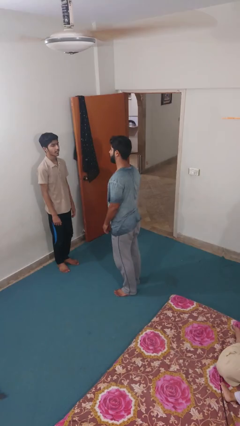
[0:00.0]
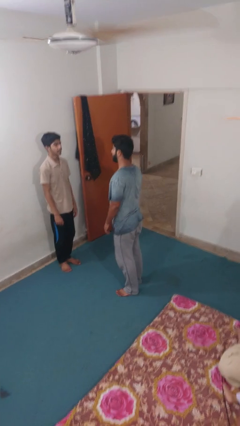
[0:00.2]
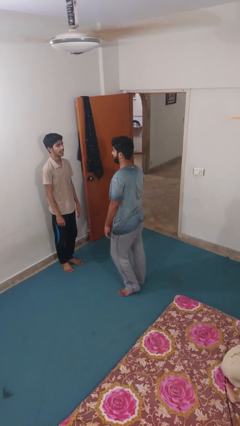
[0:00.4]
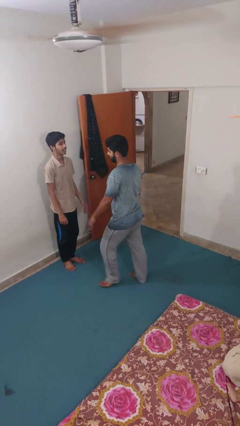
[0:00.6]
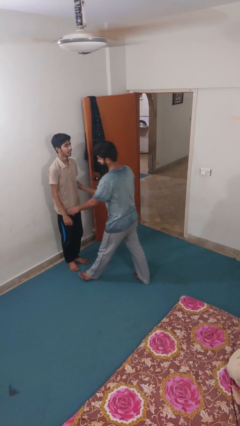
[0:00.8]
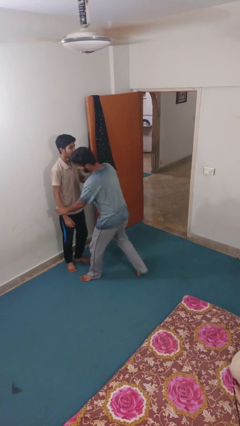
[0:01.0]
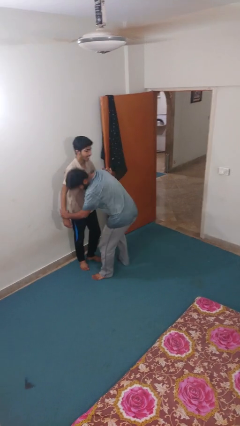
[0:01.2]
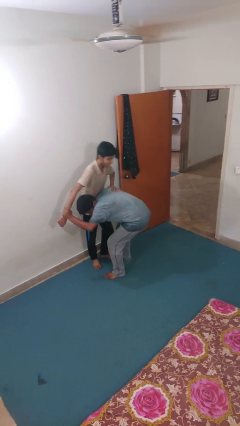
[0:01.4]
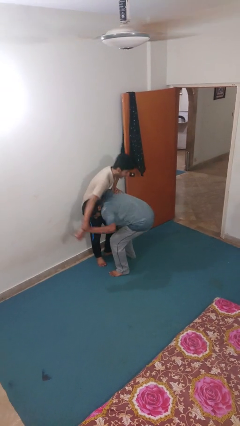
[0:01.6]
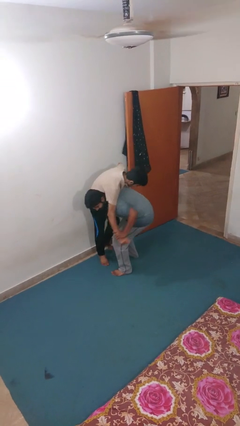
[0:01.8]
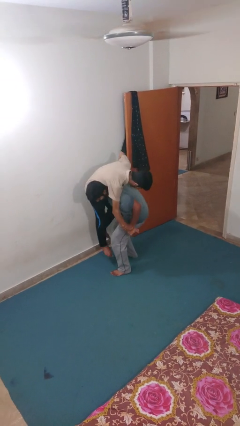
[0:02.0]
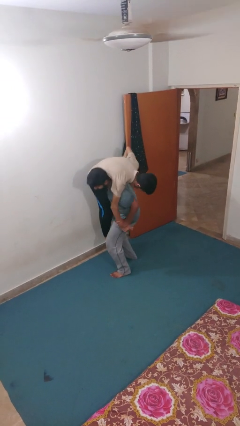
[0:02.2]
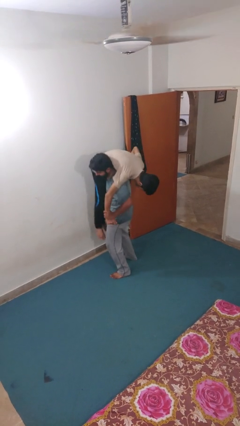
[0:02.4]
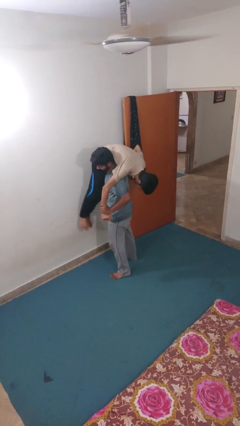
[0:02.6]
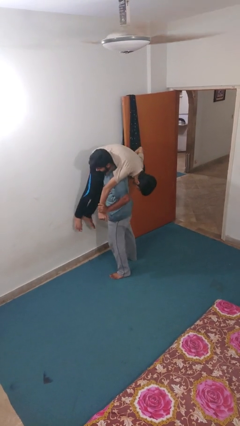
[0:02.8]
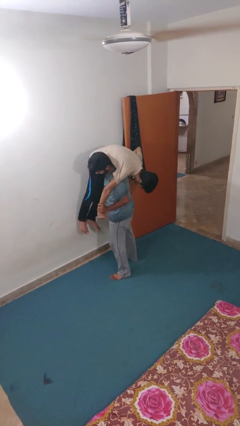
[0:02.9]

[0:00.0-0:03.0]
person carries person over shoulder

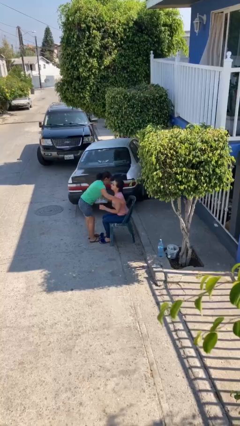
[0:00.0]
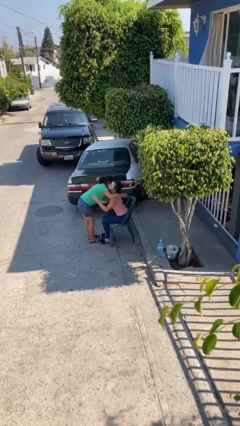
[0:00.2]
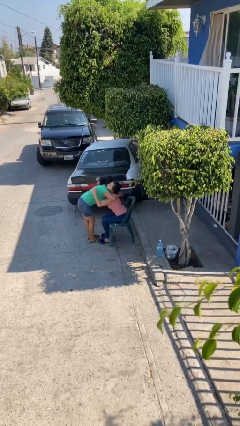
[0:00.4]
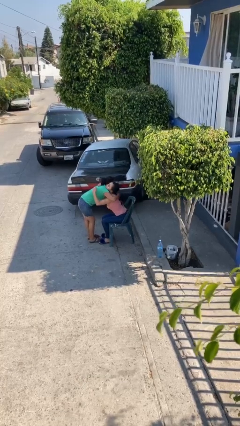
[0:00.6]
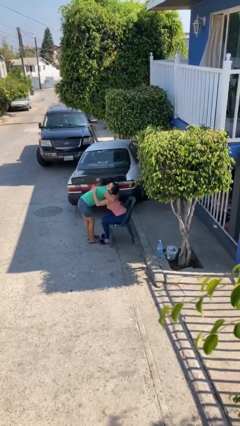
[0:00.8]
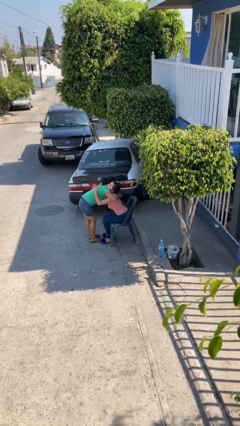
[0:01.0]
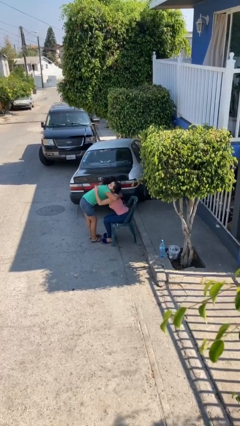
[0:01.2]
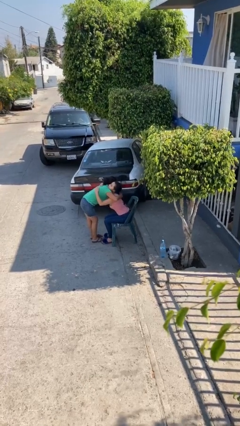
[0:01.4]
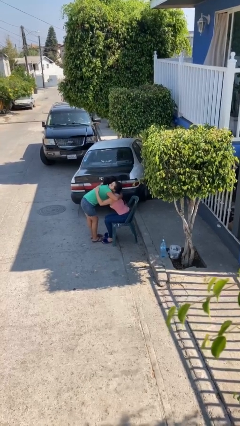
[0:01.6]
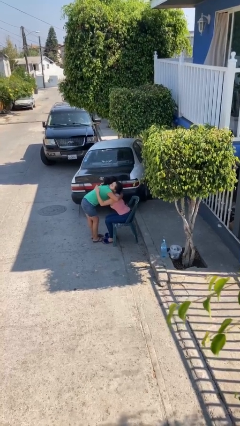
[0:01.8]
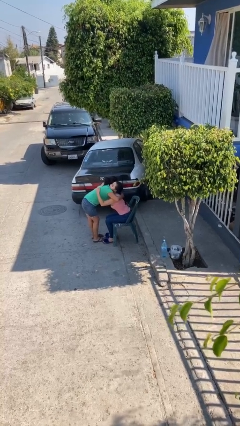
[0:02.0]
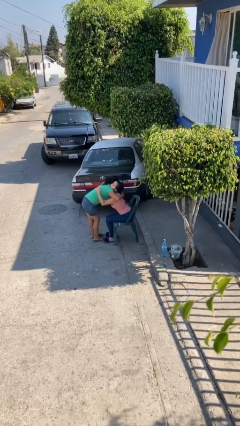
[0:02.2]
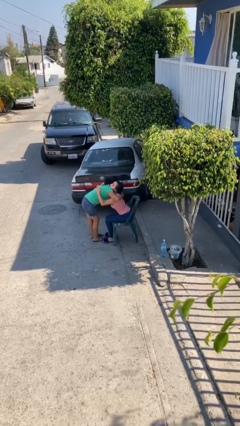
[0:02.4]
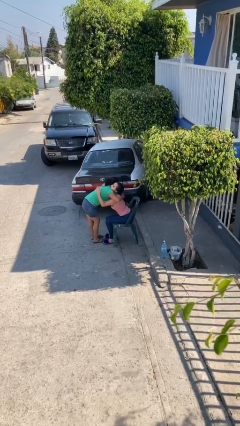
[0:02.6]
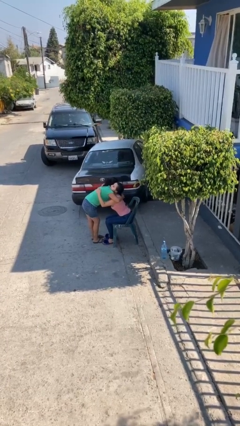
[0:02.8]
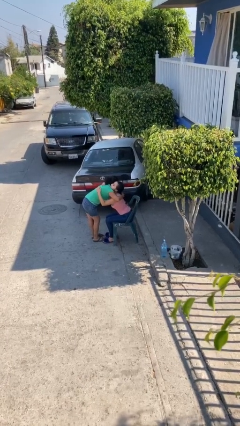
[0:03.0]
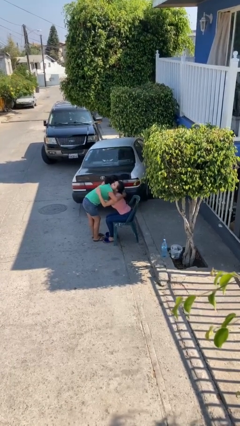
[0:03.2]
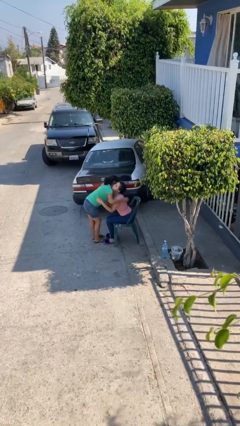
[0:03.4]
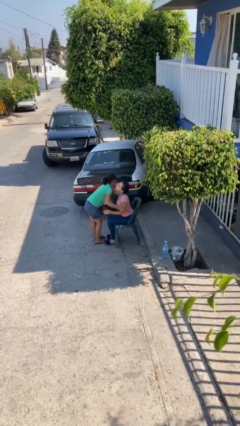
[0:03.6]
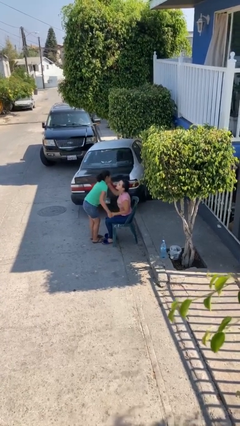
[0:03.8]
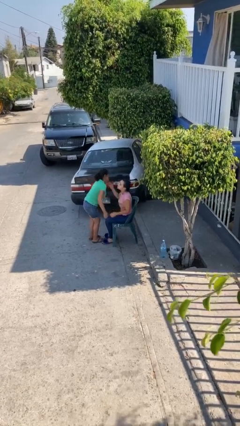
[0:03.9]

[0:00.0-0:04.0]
person embraces person

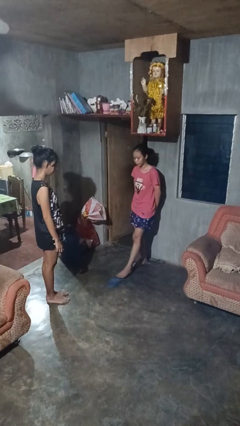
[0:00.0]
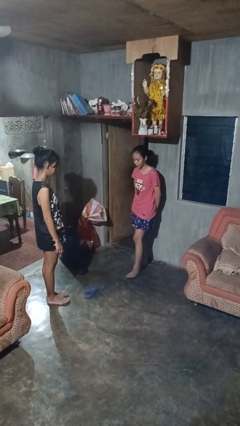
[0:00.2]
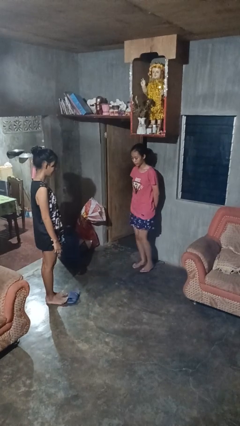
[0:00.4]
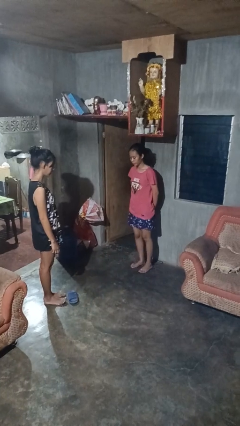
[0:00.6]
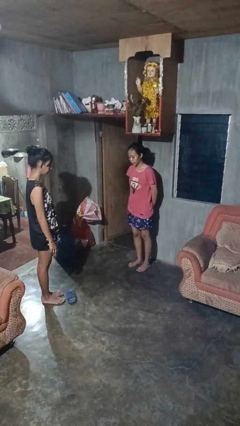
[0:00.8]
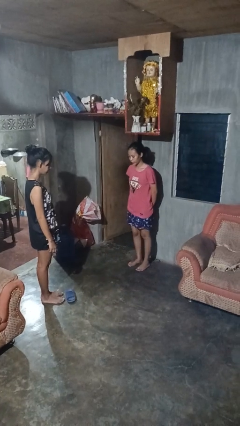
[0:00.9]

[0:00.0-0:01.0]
person kicks object to person

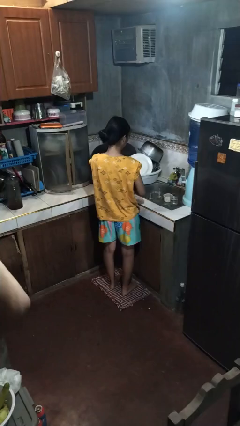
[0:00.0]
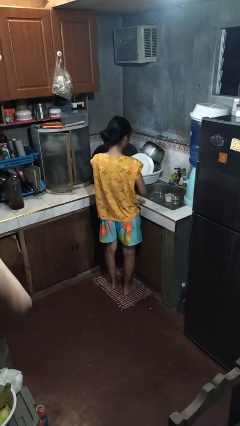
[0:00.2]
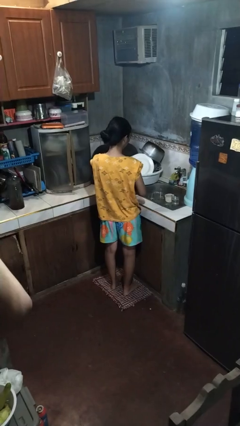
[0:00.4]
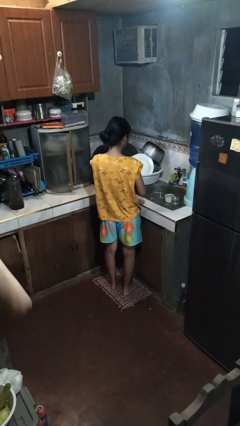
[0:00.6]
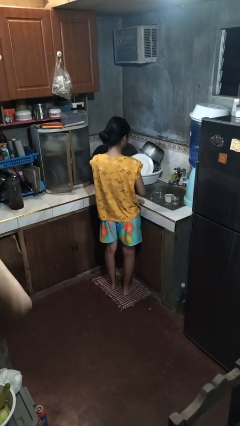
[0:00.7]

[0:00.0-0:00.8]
person turns on faucet

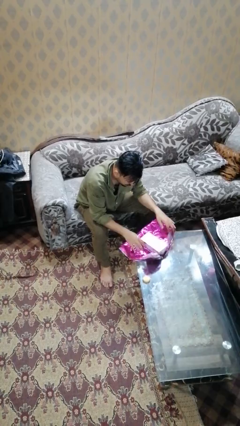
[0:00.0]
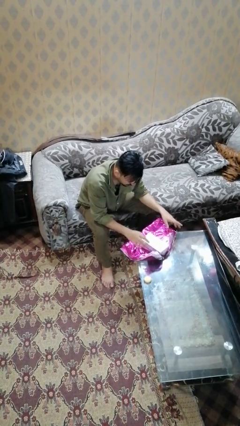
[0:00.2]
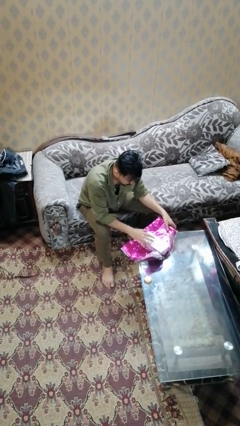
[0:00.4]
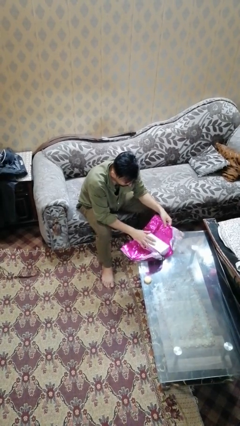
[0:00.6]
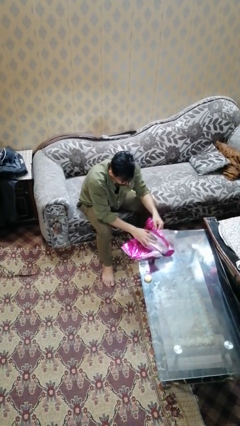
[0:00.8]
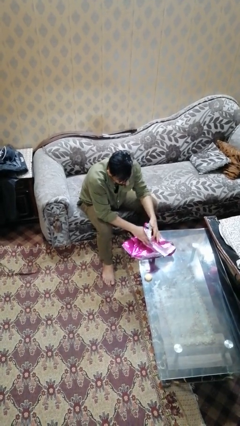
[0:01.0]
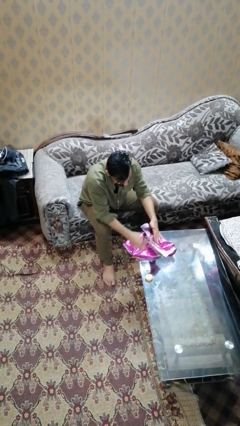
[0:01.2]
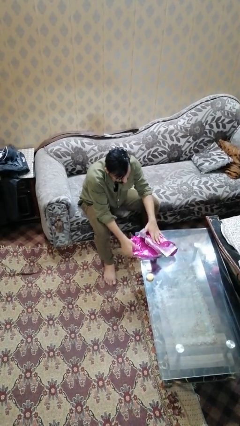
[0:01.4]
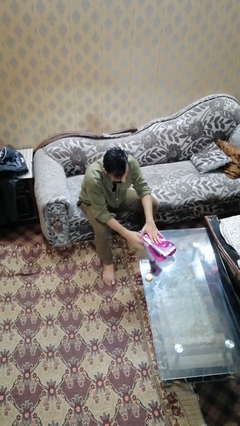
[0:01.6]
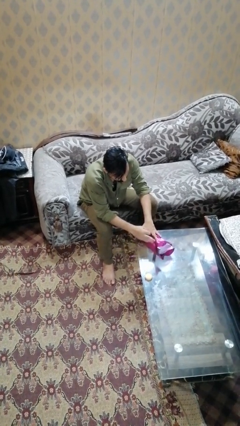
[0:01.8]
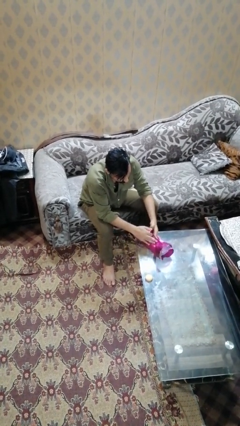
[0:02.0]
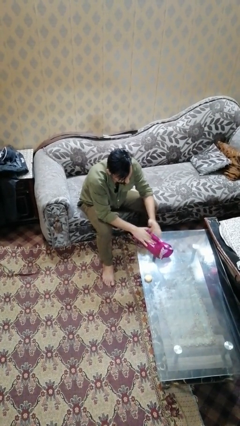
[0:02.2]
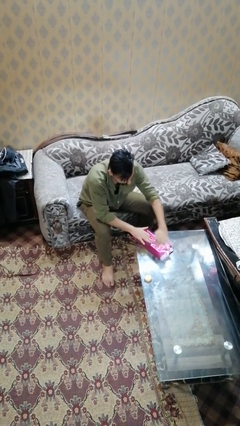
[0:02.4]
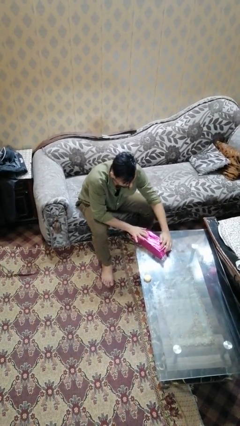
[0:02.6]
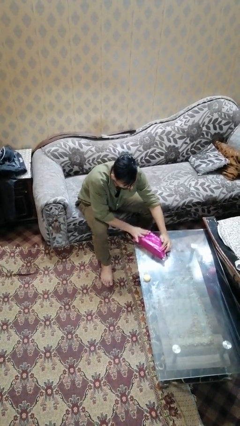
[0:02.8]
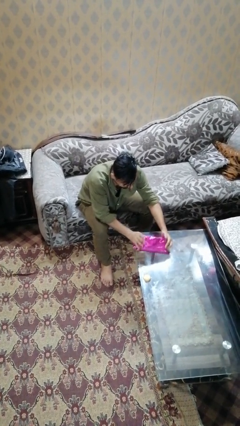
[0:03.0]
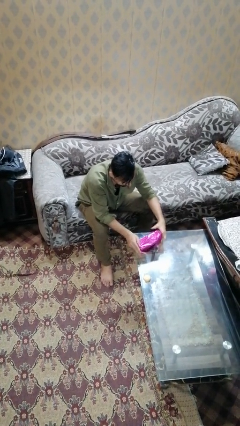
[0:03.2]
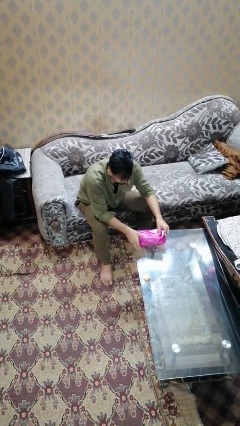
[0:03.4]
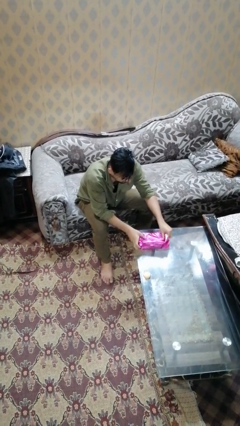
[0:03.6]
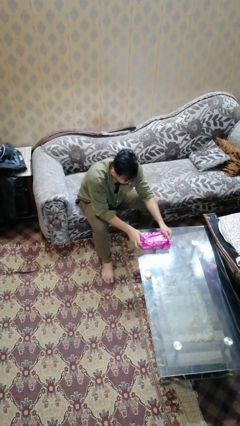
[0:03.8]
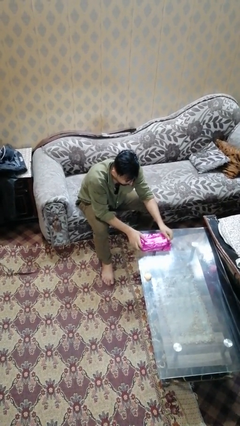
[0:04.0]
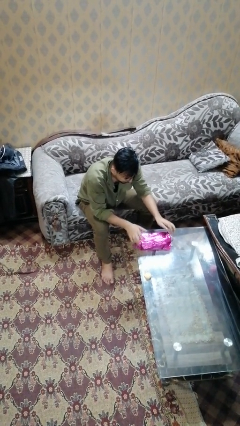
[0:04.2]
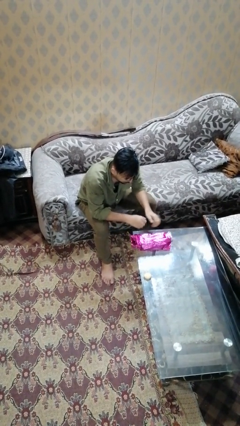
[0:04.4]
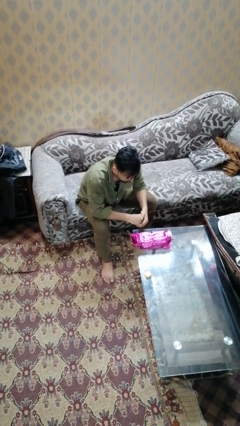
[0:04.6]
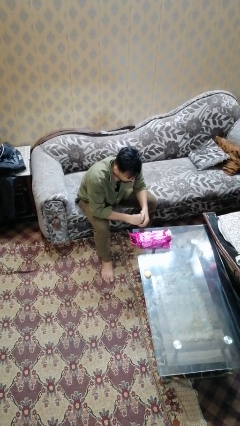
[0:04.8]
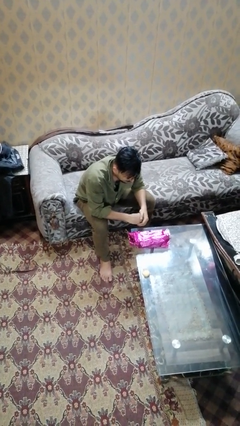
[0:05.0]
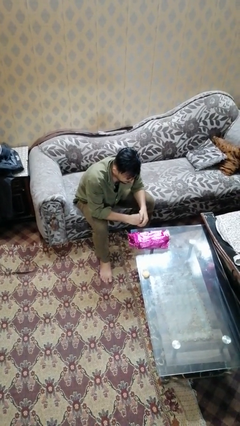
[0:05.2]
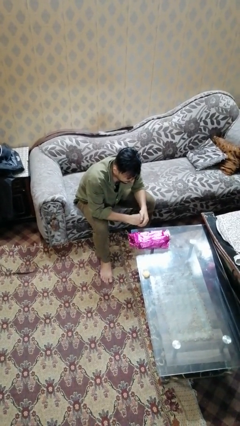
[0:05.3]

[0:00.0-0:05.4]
person wraps box

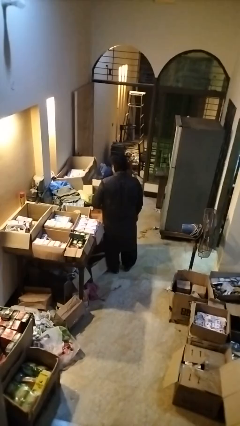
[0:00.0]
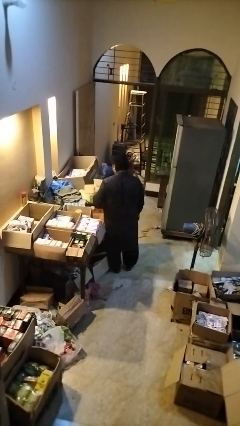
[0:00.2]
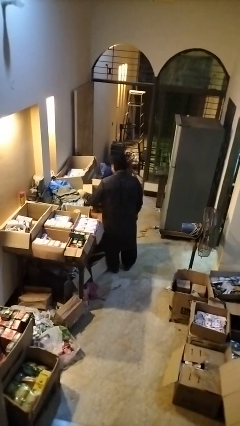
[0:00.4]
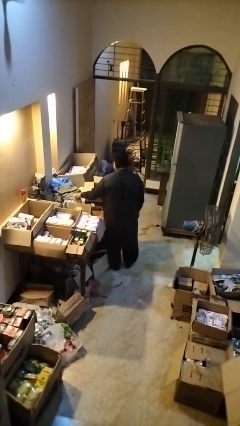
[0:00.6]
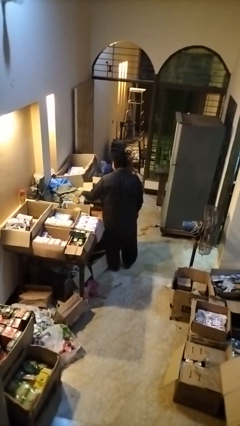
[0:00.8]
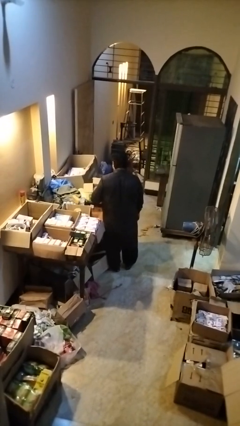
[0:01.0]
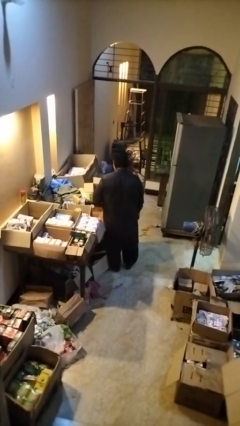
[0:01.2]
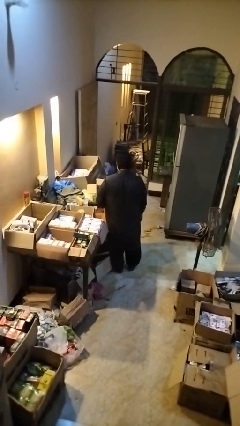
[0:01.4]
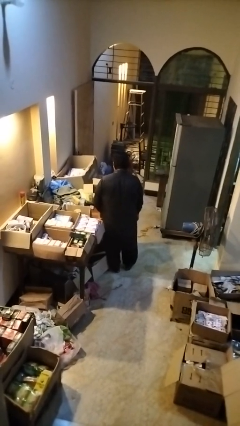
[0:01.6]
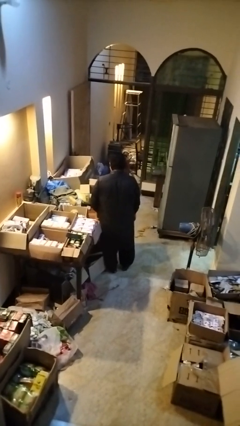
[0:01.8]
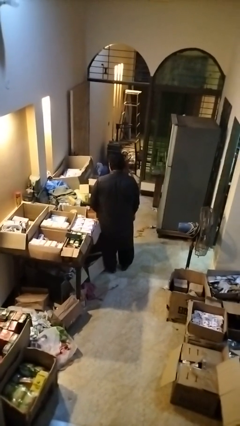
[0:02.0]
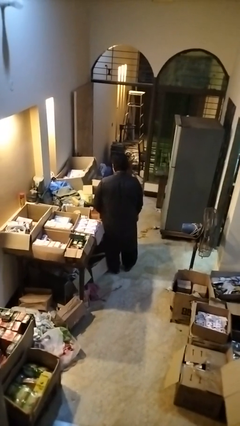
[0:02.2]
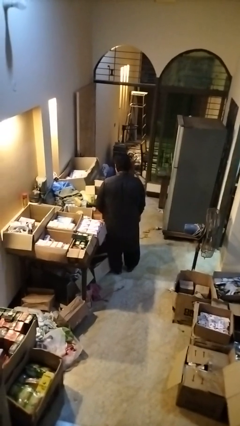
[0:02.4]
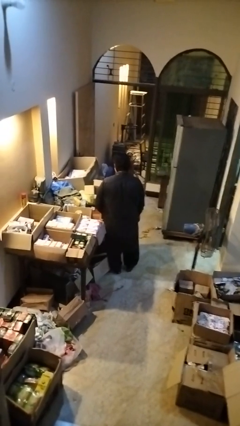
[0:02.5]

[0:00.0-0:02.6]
person puts object into box

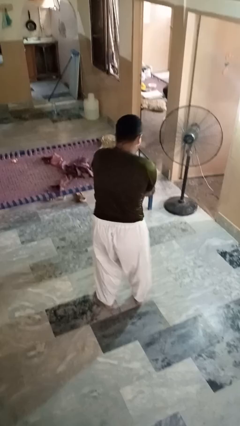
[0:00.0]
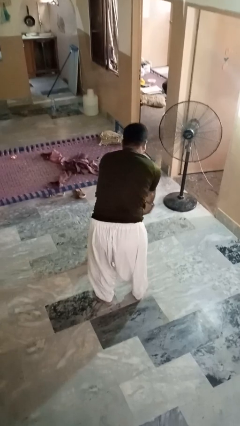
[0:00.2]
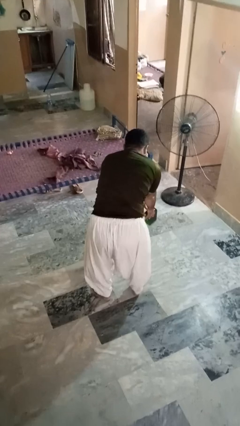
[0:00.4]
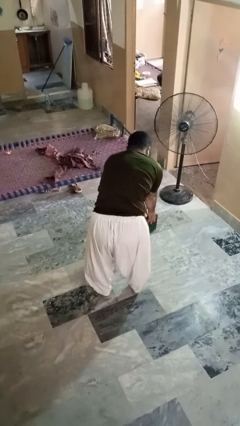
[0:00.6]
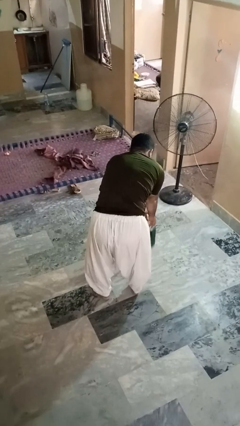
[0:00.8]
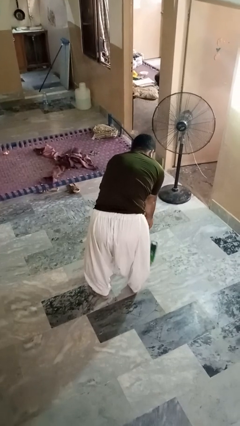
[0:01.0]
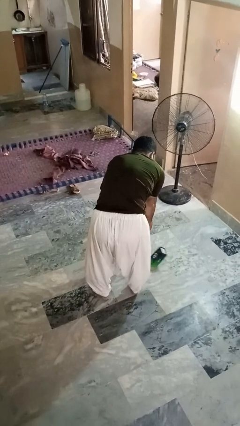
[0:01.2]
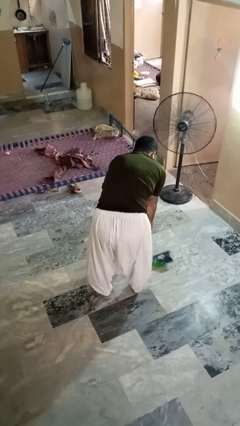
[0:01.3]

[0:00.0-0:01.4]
person catches dropped object
